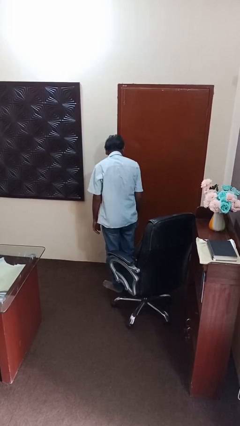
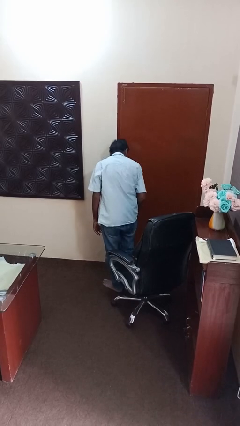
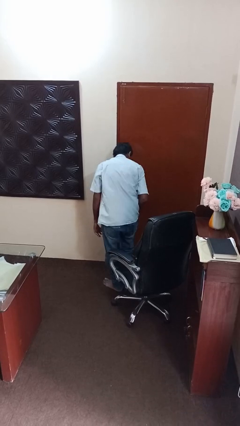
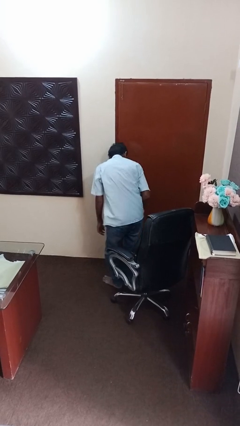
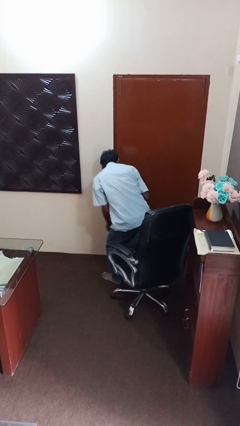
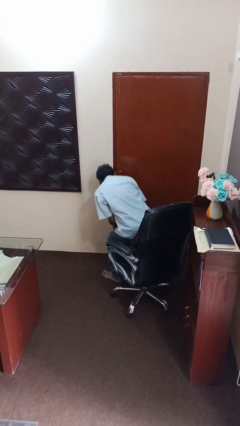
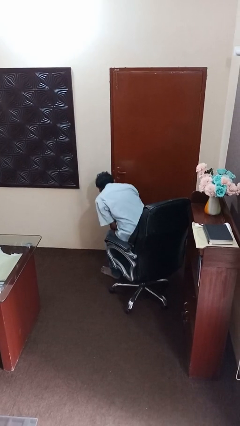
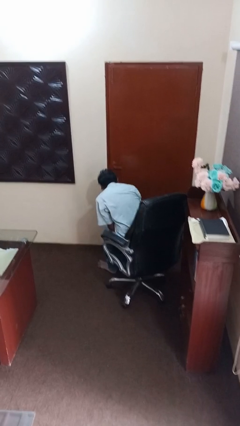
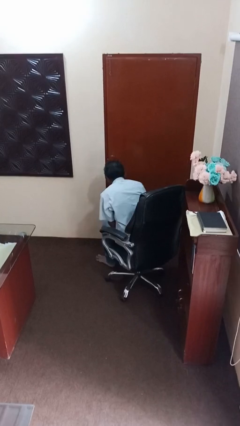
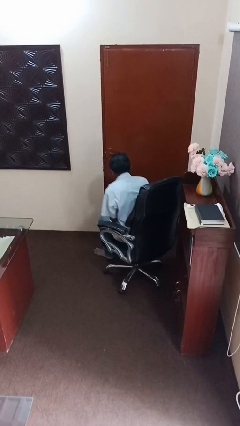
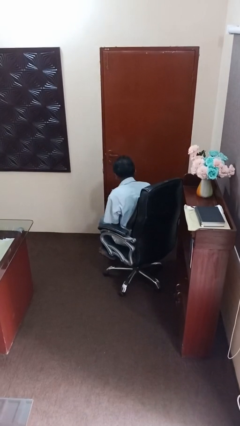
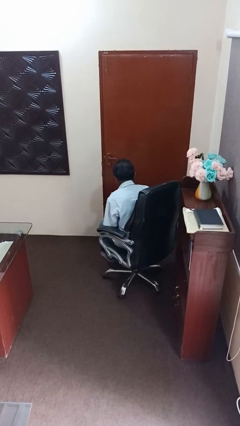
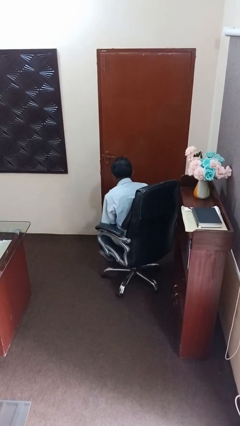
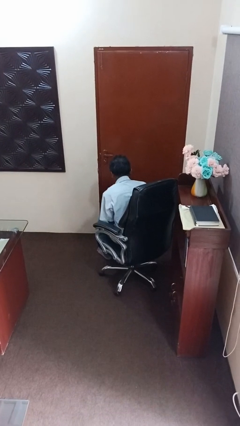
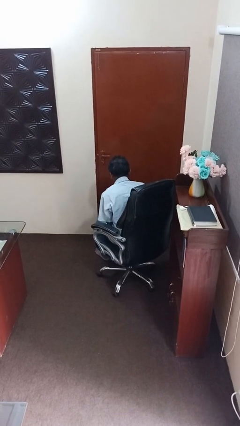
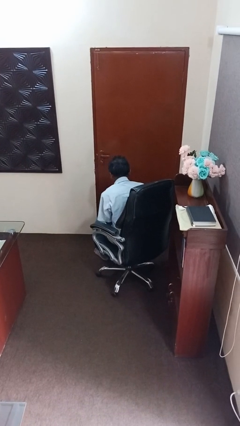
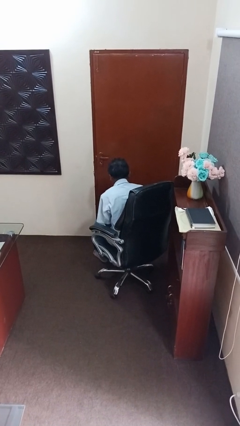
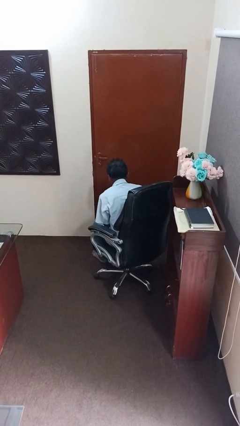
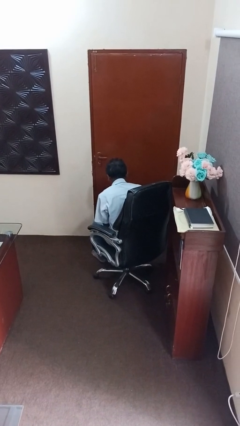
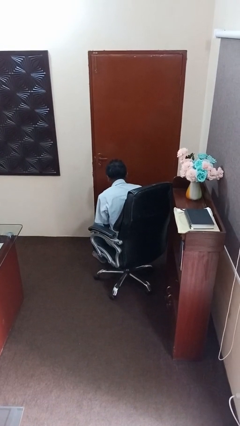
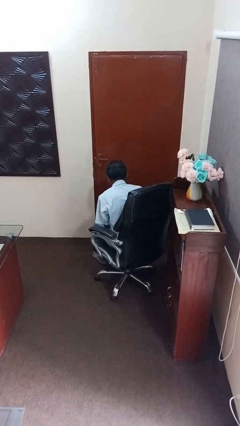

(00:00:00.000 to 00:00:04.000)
person sits down

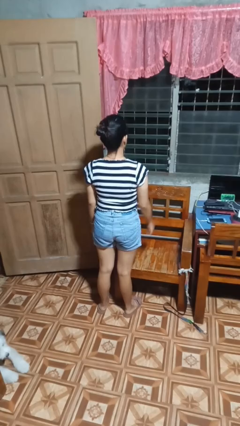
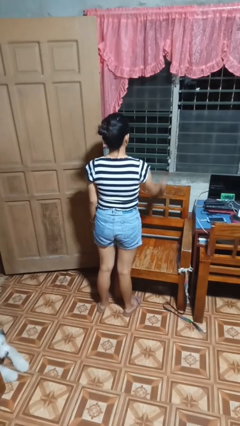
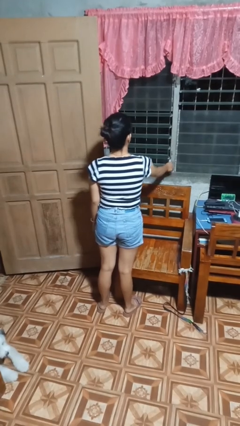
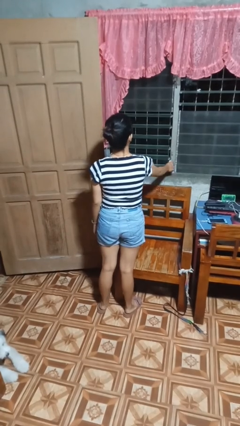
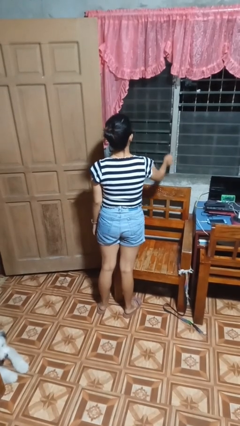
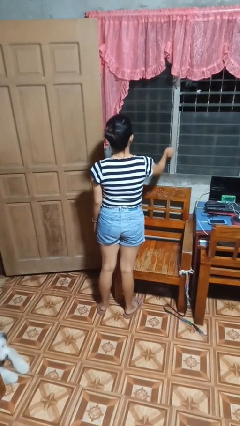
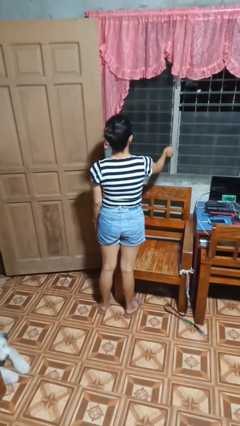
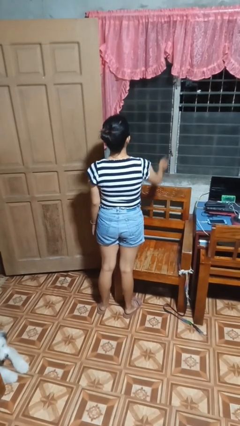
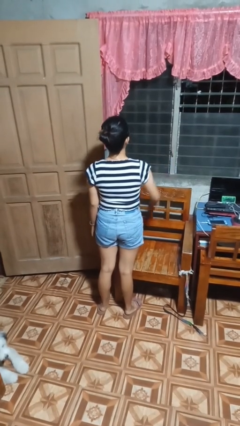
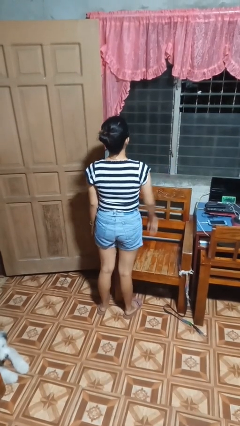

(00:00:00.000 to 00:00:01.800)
person closes home window

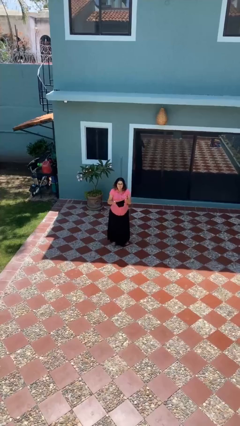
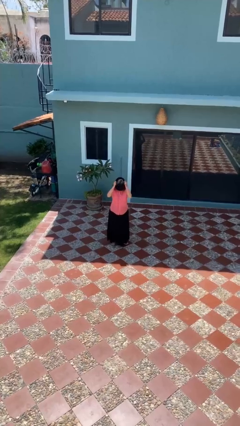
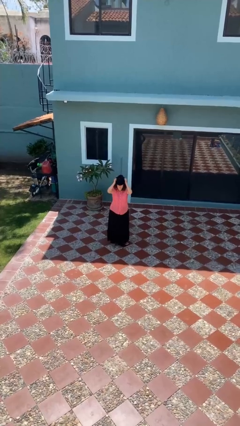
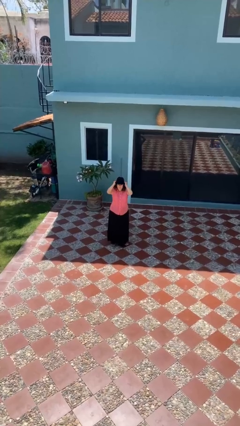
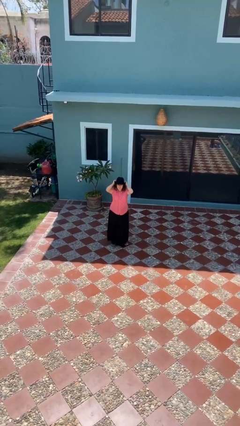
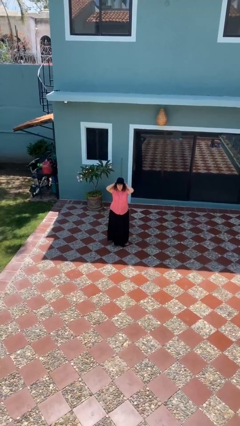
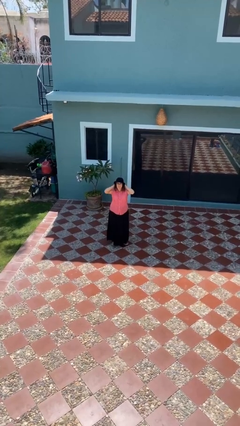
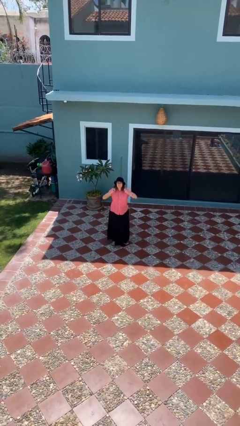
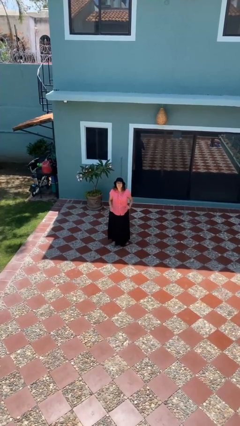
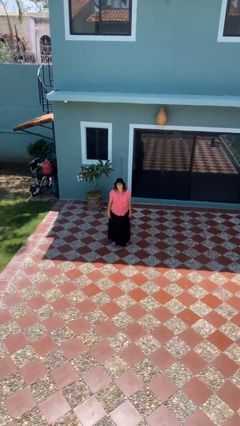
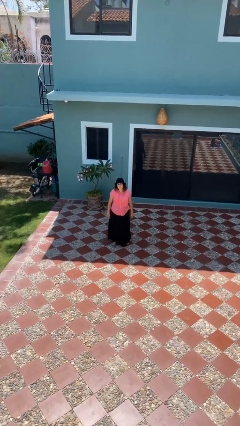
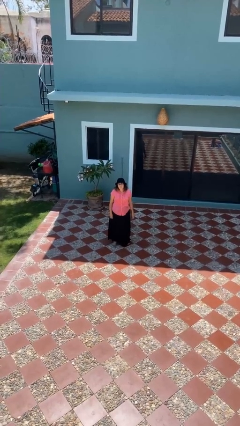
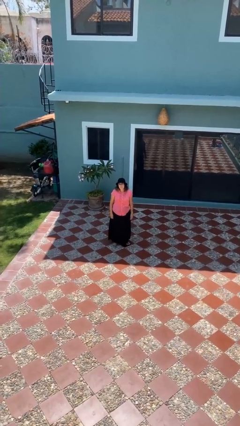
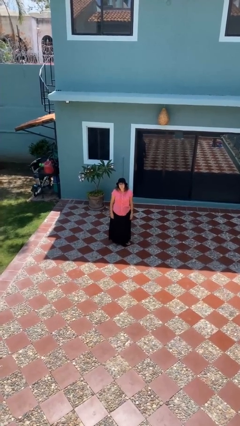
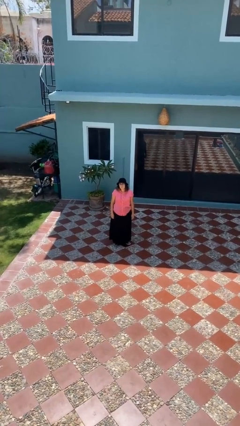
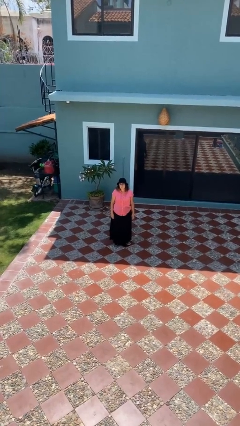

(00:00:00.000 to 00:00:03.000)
person puts on hat

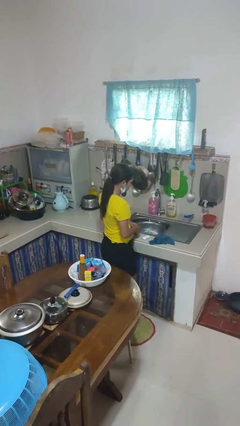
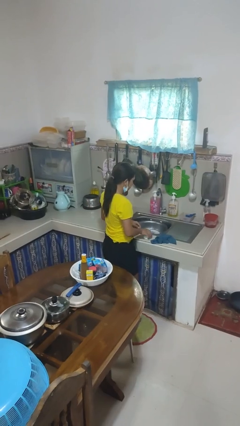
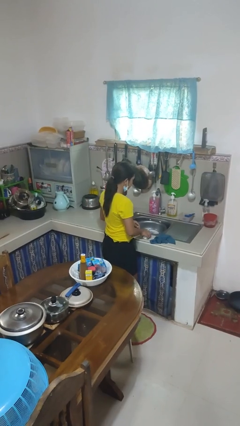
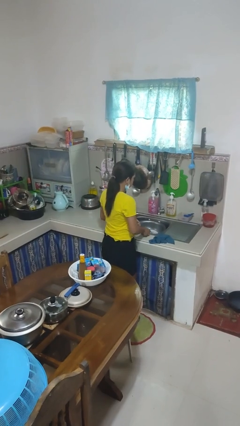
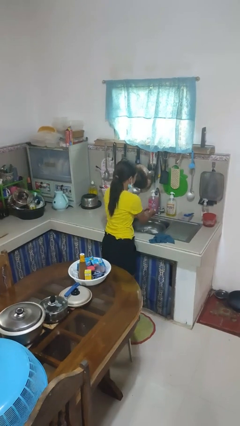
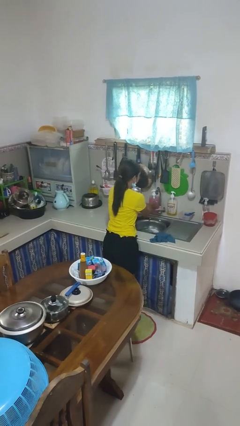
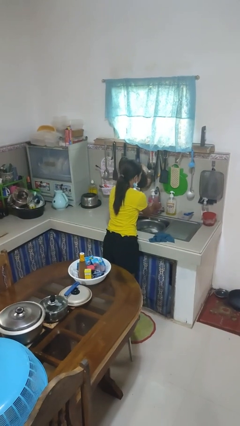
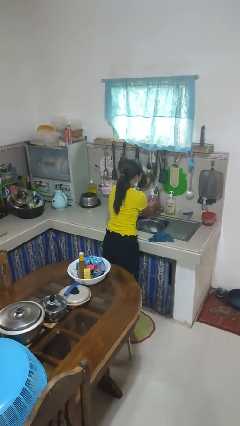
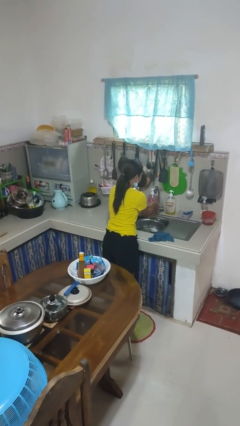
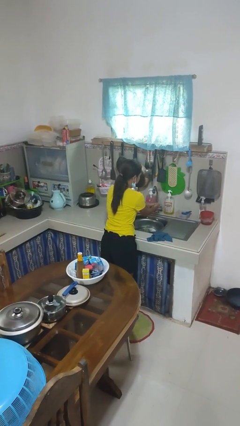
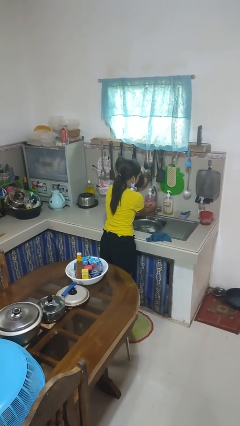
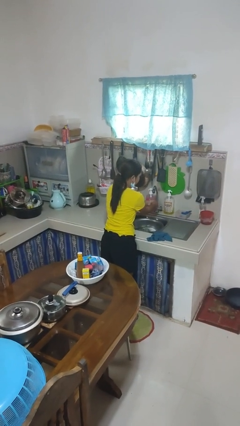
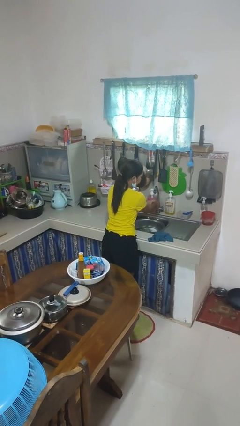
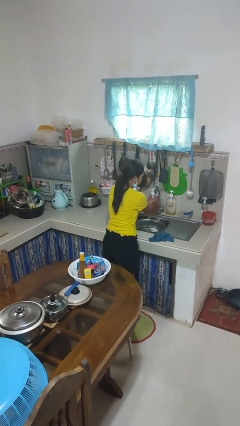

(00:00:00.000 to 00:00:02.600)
person washes hands

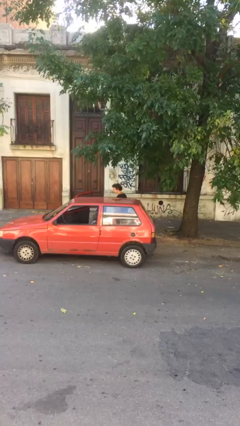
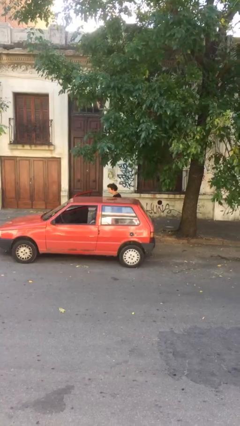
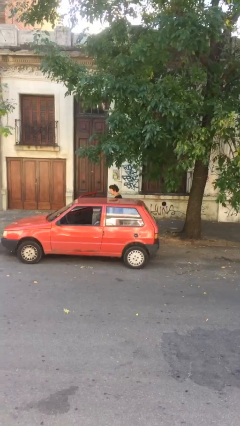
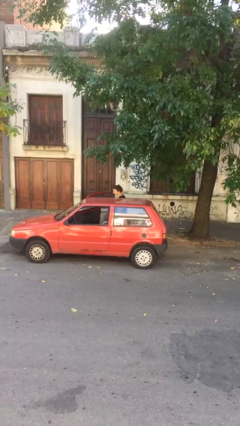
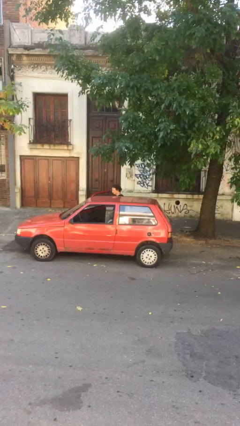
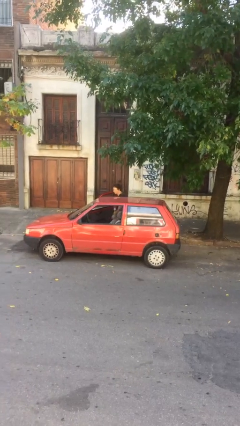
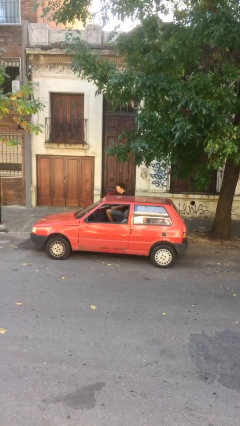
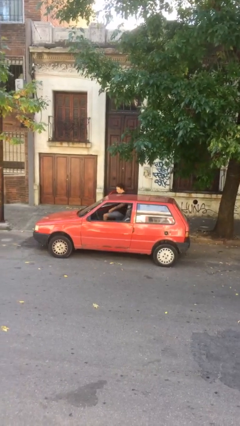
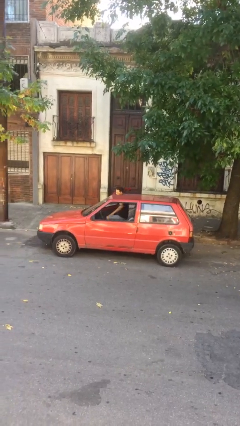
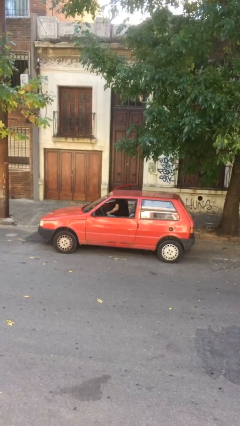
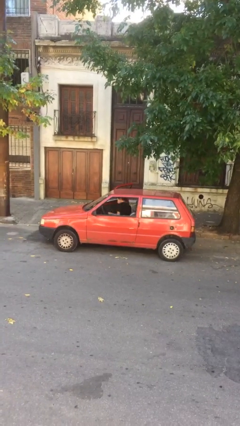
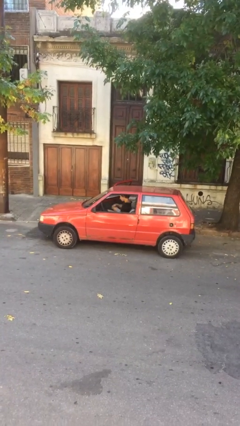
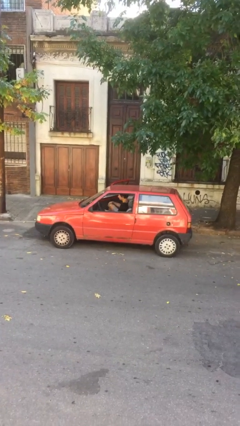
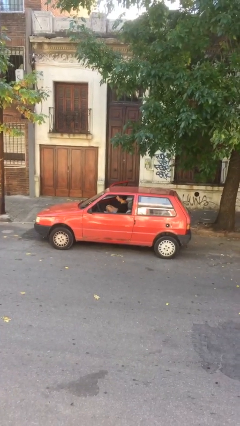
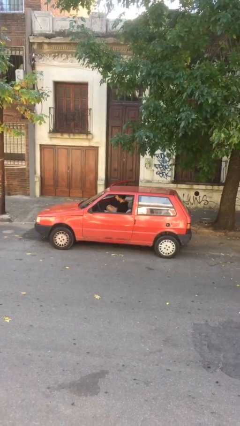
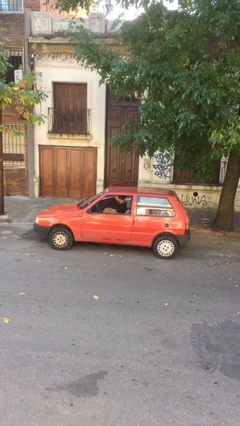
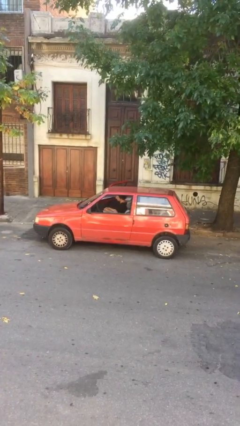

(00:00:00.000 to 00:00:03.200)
person enters car

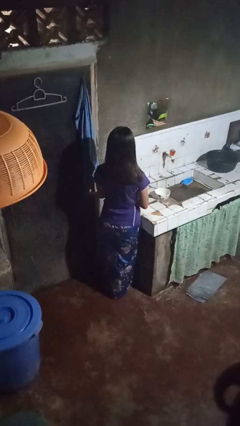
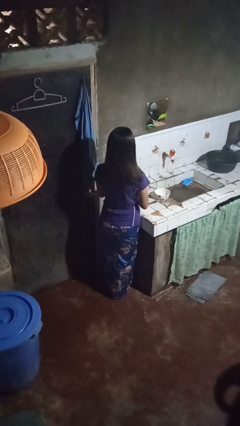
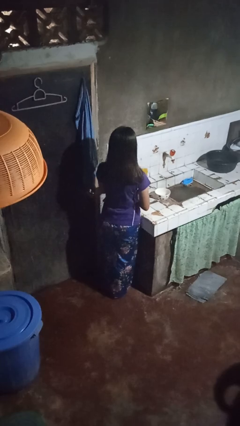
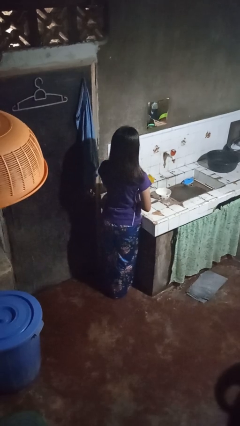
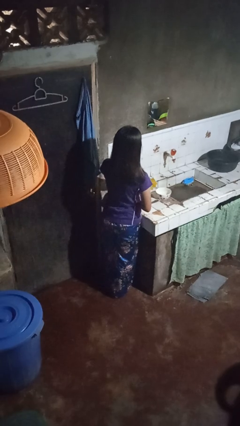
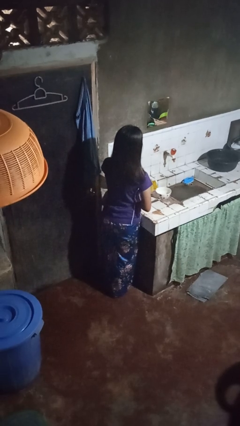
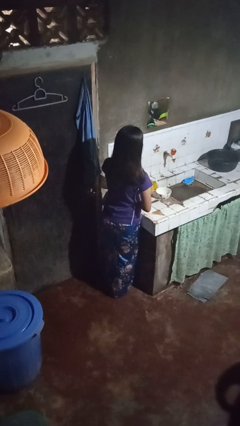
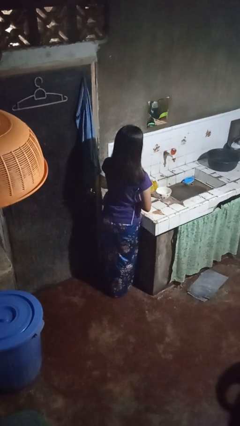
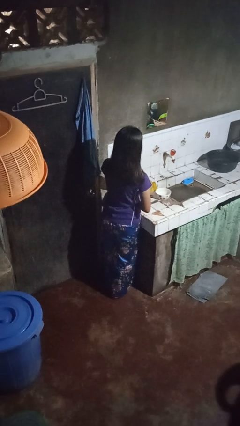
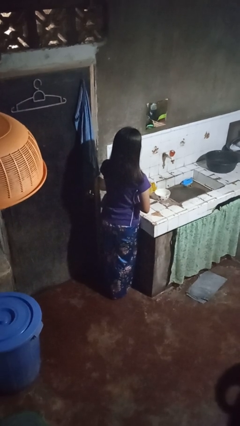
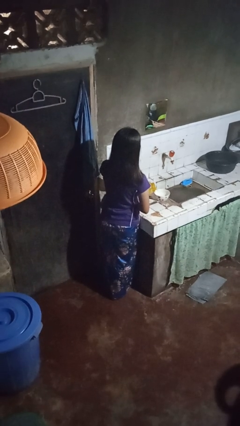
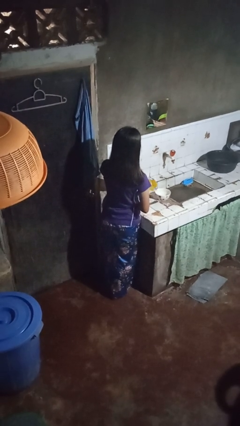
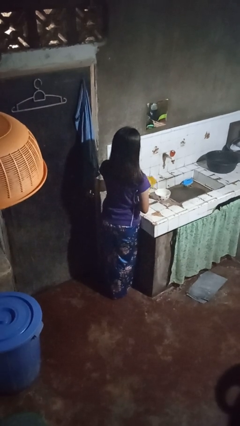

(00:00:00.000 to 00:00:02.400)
person pours into bowl

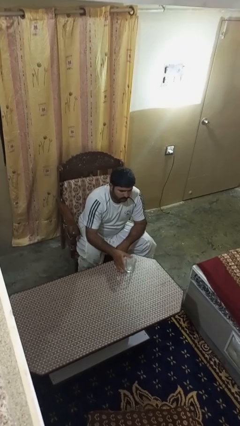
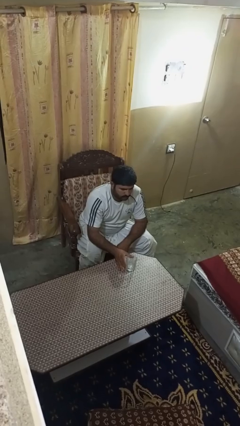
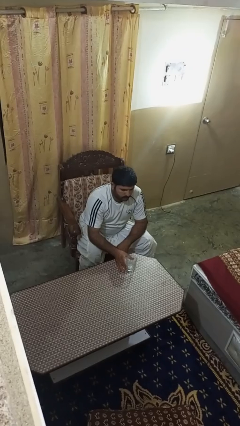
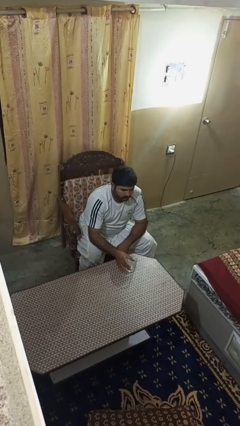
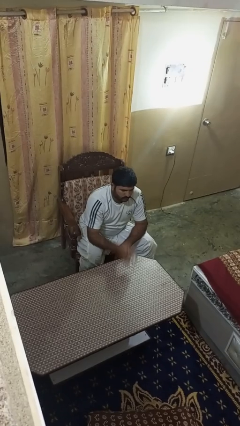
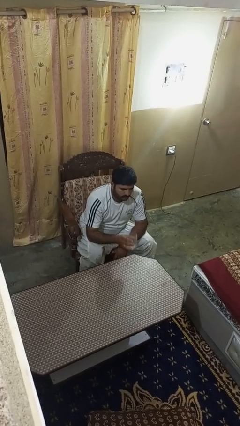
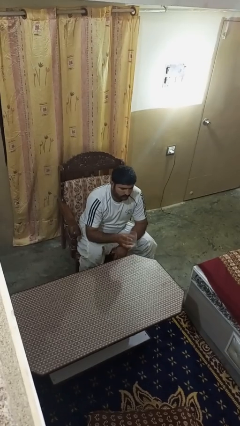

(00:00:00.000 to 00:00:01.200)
person picks up object from table
